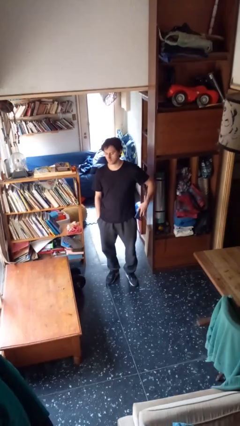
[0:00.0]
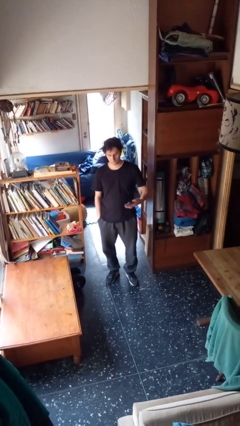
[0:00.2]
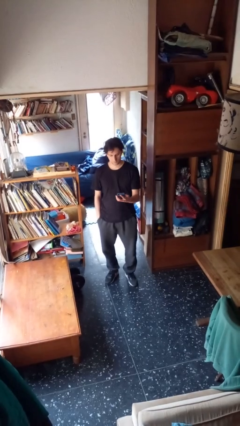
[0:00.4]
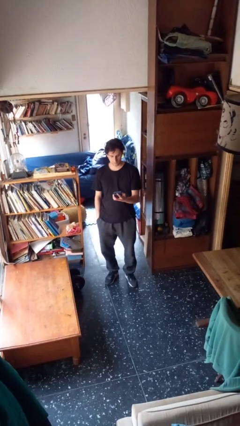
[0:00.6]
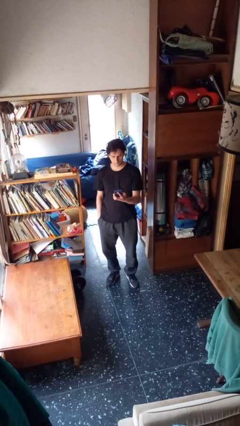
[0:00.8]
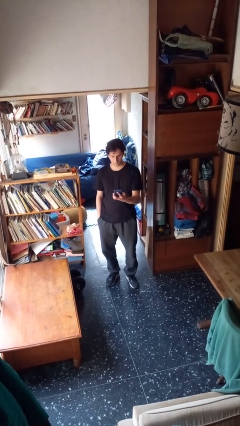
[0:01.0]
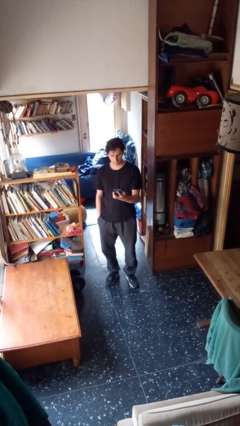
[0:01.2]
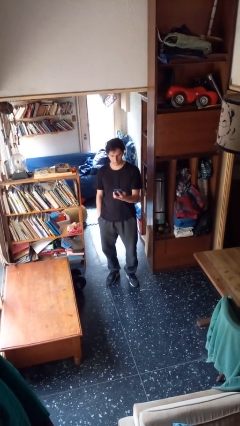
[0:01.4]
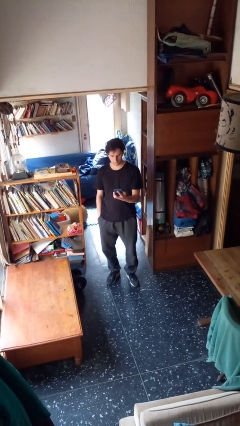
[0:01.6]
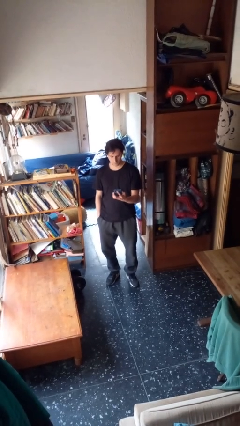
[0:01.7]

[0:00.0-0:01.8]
person takes phone from pocket

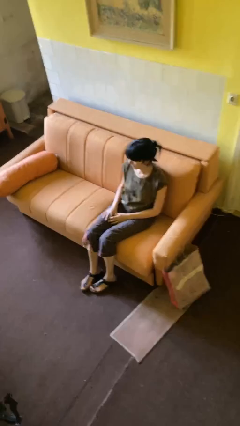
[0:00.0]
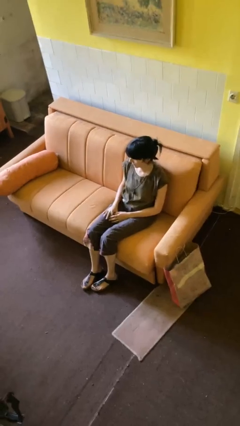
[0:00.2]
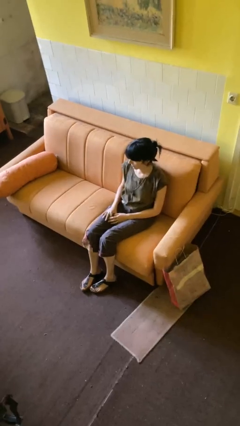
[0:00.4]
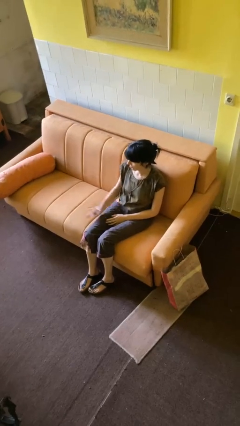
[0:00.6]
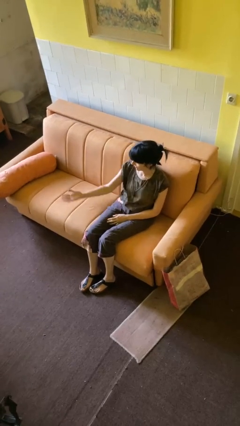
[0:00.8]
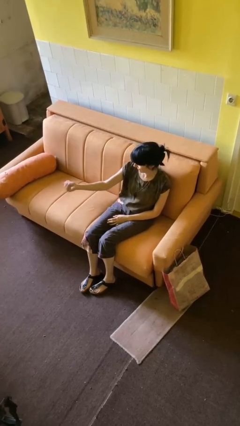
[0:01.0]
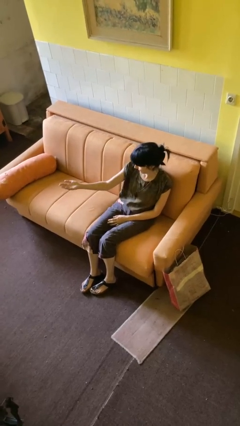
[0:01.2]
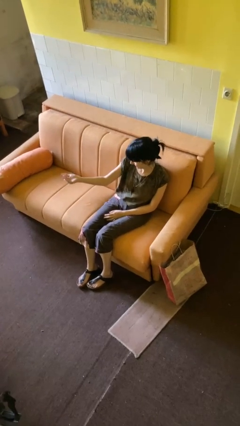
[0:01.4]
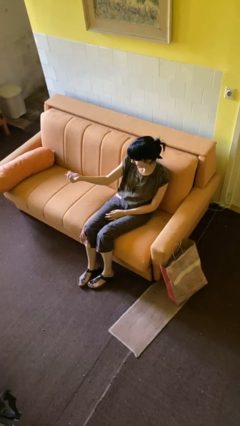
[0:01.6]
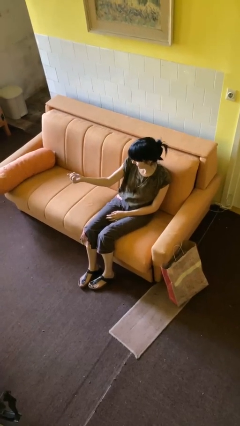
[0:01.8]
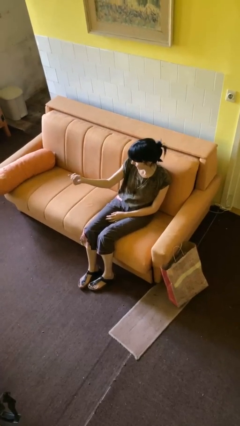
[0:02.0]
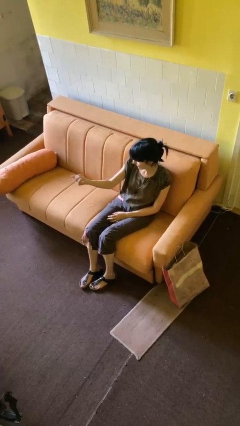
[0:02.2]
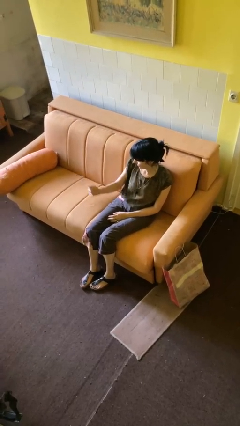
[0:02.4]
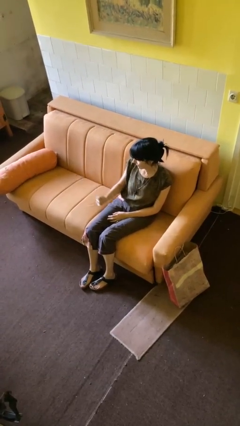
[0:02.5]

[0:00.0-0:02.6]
person gestures come here

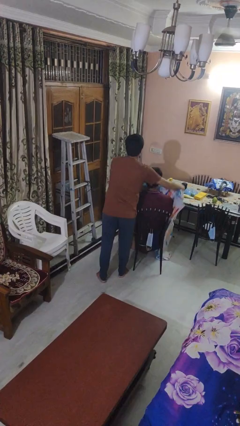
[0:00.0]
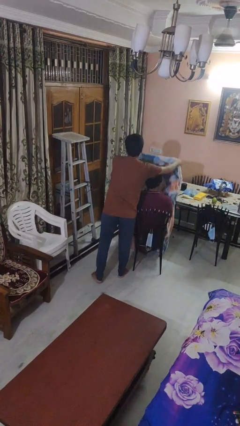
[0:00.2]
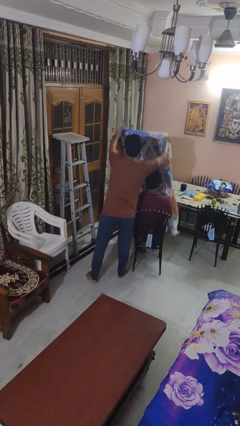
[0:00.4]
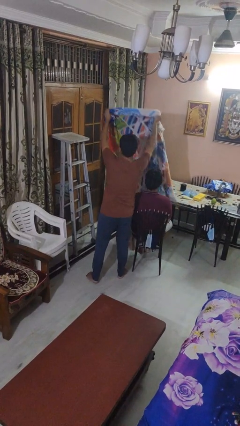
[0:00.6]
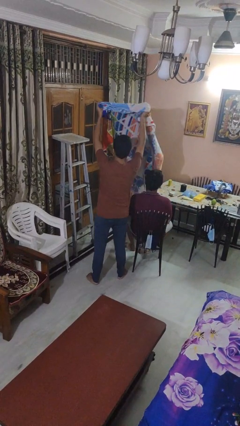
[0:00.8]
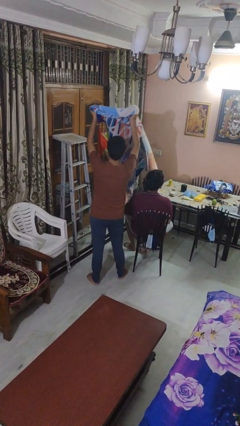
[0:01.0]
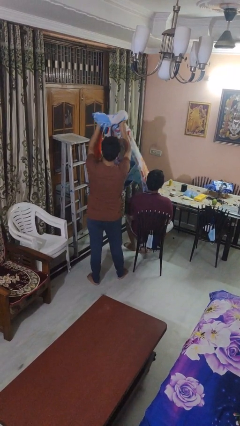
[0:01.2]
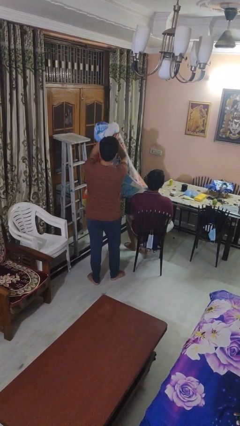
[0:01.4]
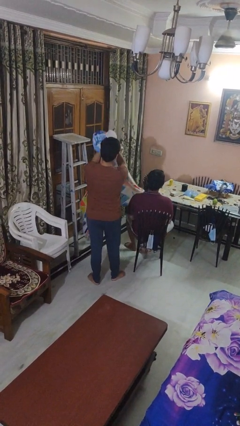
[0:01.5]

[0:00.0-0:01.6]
person uncovers friend with blanket

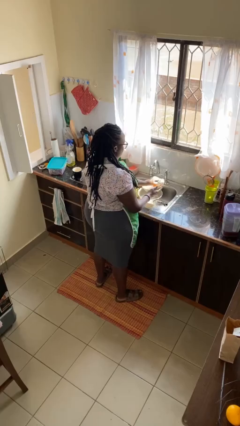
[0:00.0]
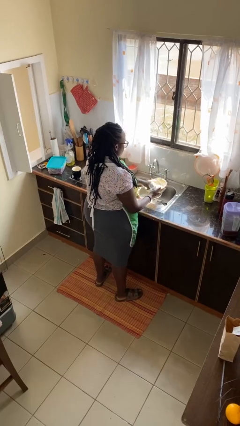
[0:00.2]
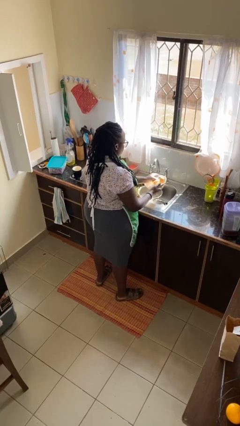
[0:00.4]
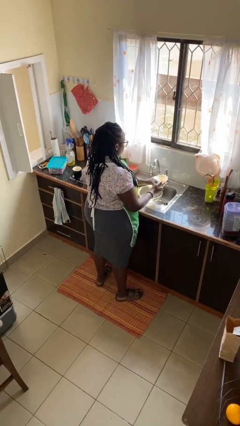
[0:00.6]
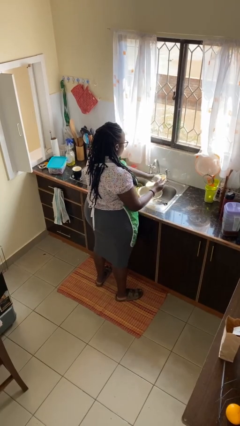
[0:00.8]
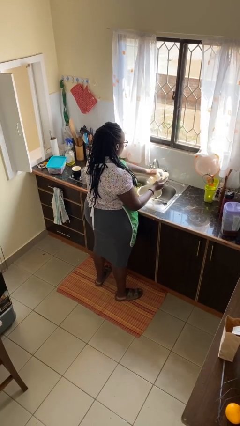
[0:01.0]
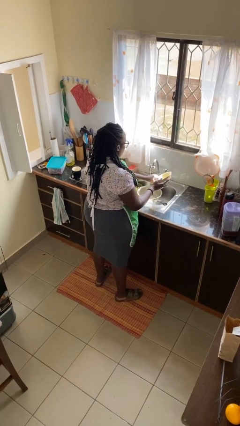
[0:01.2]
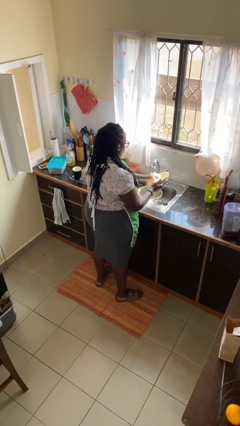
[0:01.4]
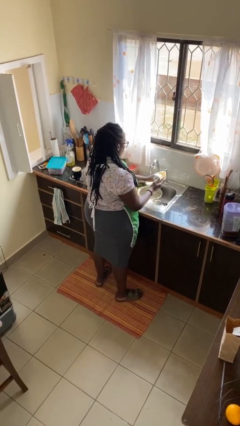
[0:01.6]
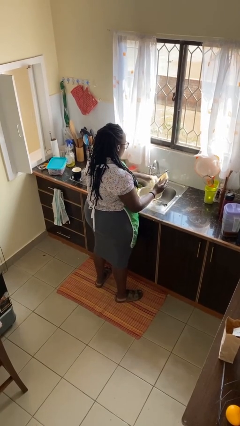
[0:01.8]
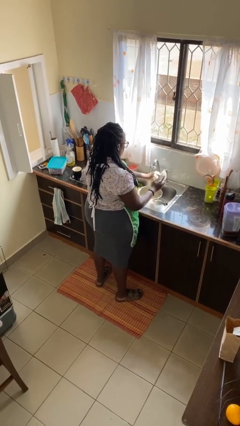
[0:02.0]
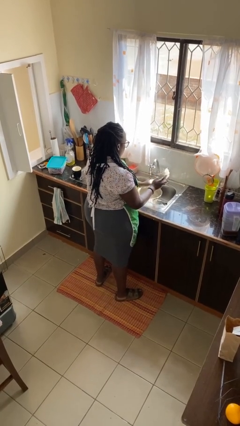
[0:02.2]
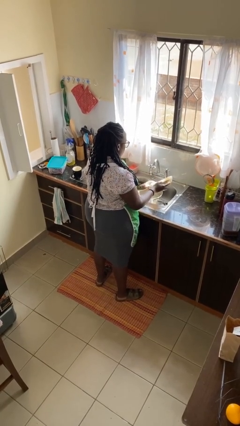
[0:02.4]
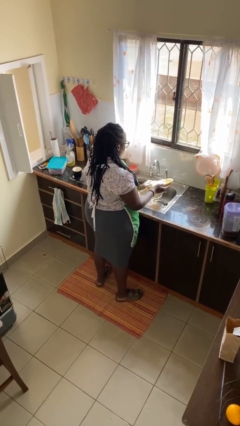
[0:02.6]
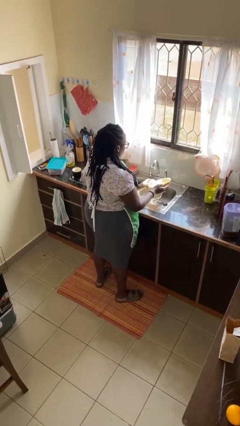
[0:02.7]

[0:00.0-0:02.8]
person washes dish

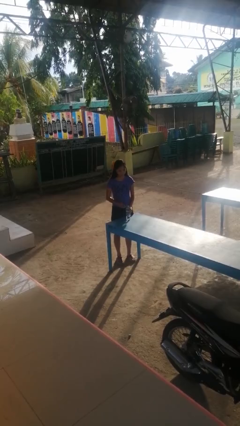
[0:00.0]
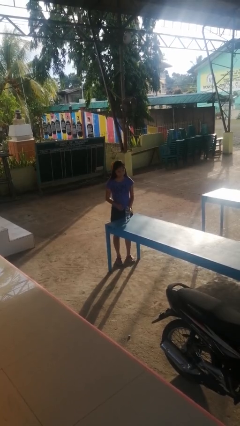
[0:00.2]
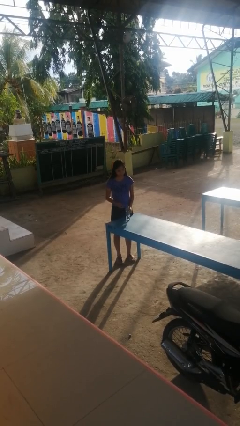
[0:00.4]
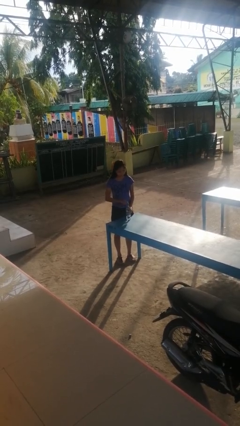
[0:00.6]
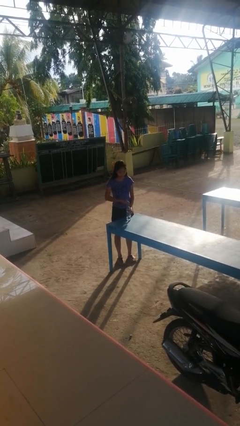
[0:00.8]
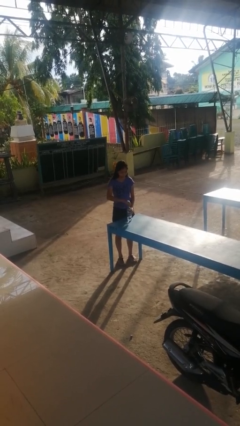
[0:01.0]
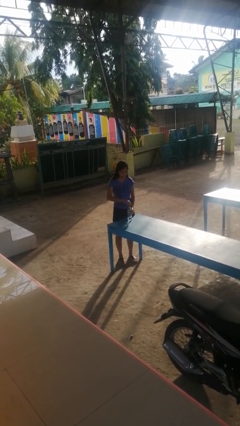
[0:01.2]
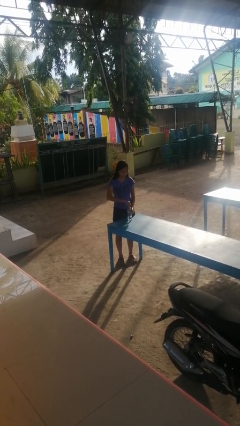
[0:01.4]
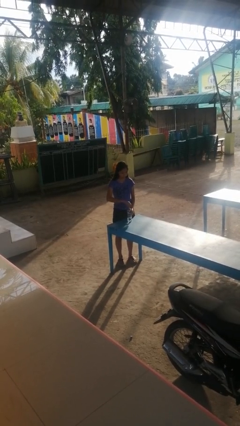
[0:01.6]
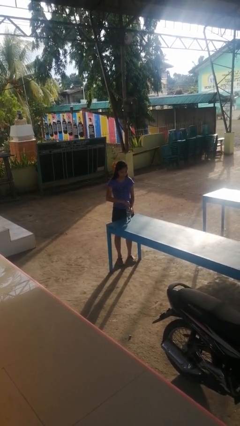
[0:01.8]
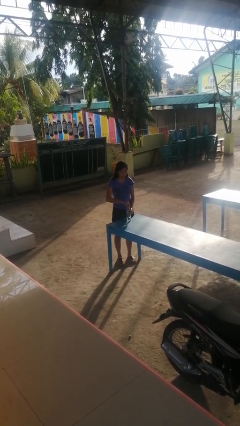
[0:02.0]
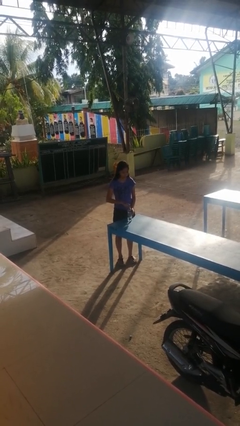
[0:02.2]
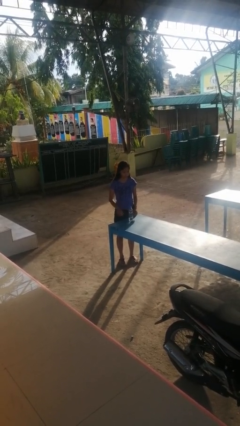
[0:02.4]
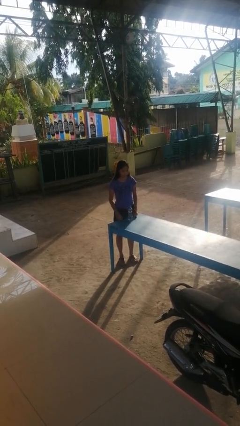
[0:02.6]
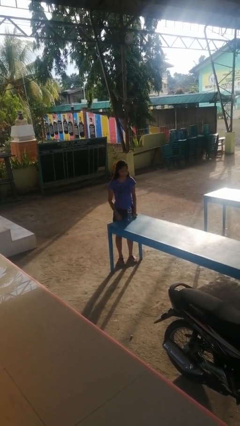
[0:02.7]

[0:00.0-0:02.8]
person screws lid to bottle

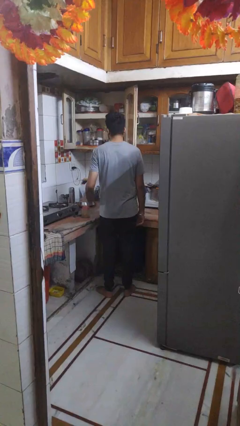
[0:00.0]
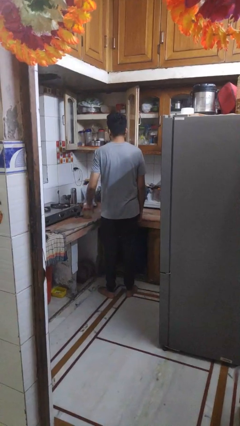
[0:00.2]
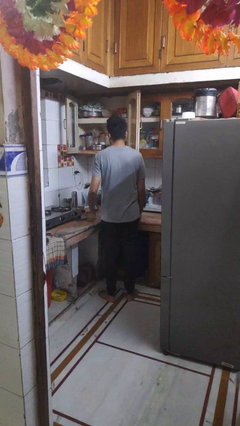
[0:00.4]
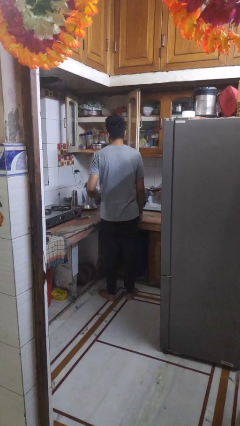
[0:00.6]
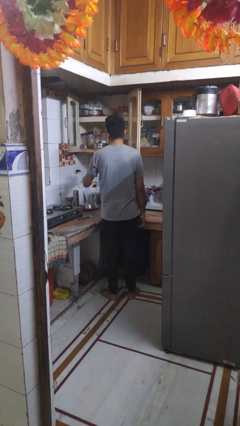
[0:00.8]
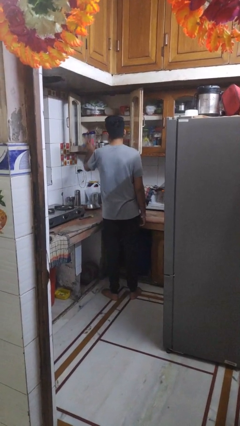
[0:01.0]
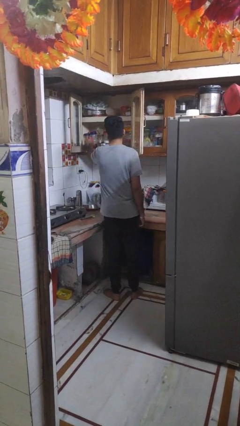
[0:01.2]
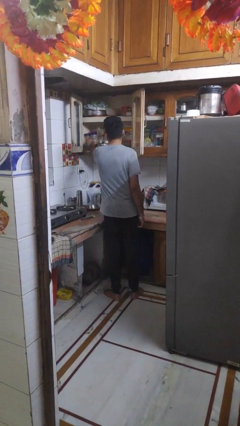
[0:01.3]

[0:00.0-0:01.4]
person puts object in cabinet

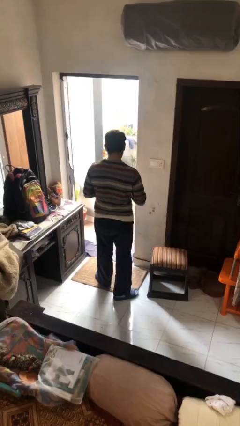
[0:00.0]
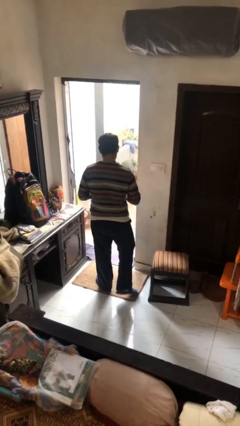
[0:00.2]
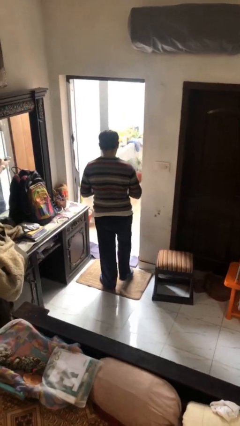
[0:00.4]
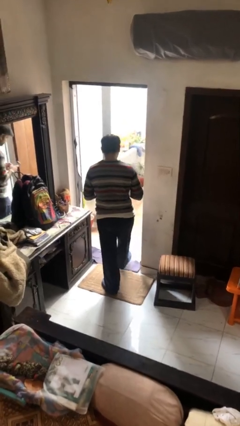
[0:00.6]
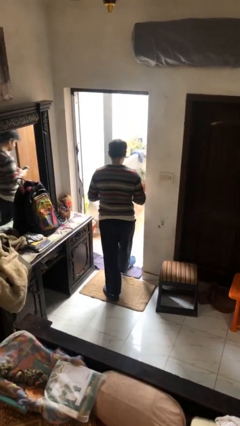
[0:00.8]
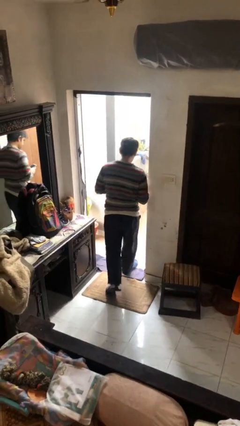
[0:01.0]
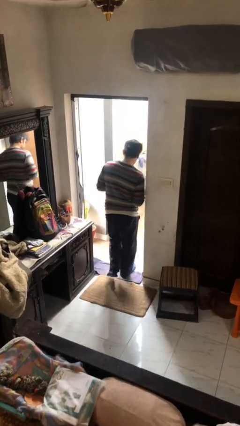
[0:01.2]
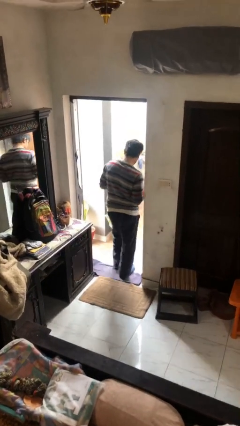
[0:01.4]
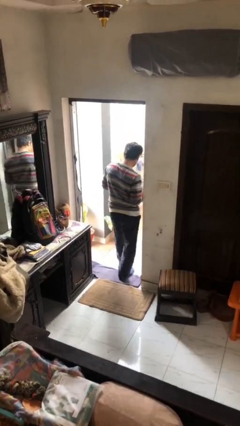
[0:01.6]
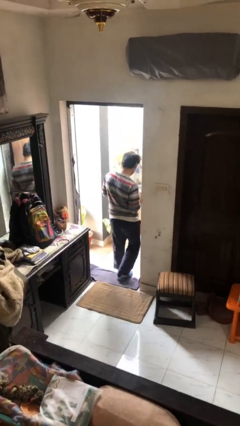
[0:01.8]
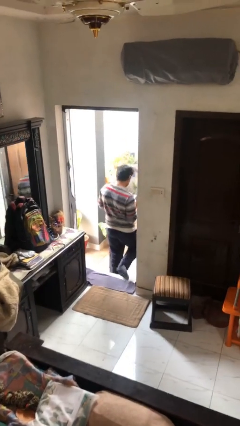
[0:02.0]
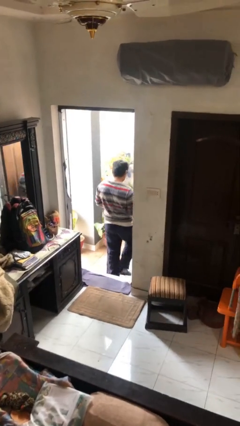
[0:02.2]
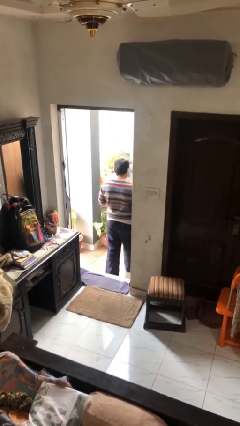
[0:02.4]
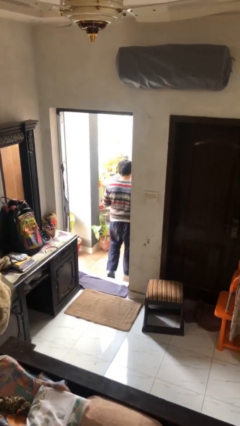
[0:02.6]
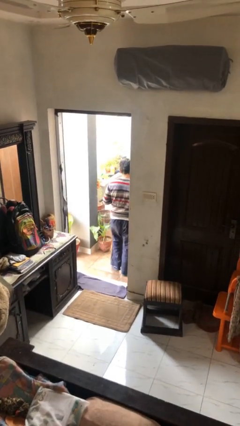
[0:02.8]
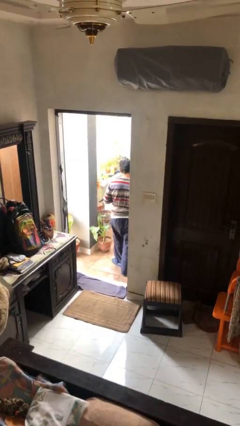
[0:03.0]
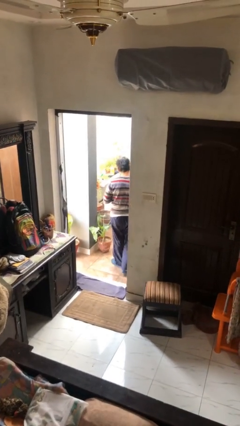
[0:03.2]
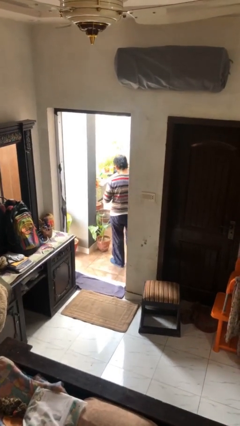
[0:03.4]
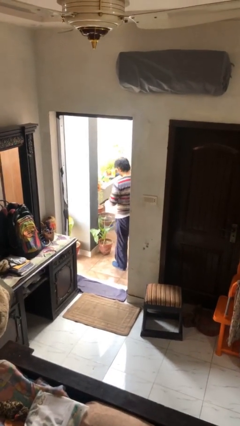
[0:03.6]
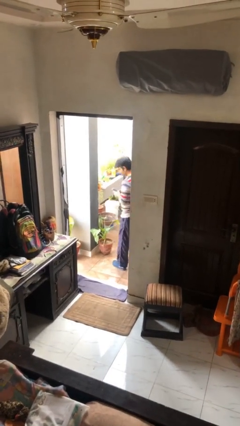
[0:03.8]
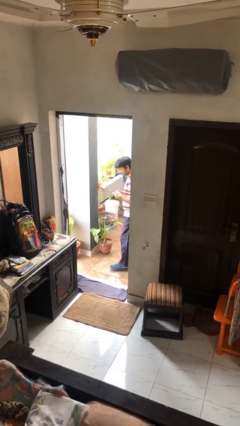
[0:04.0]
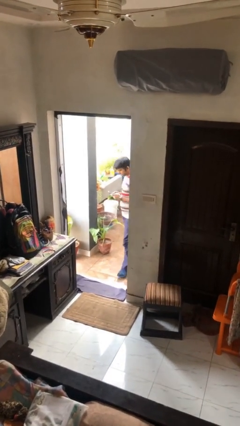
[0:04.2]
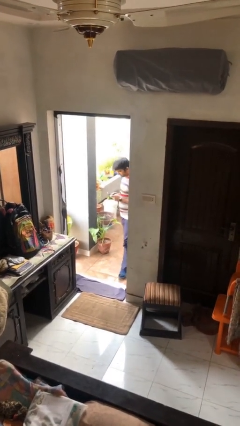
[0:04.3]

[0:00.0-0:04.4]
person exits scene through structure
